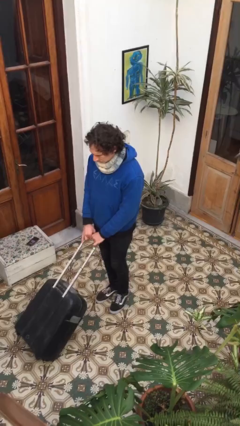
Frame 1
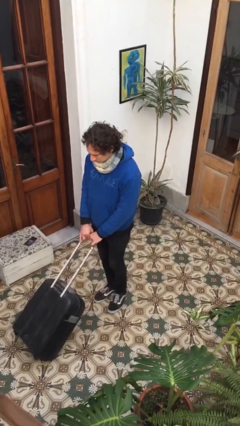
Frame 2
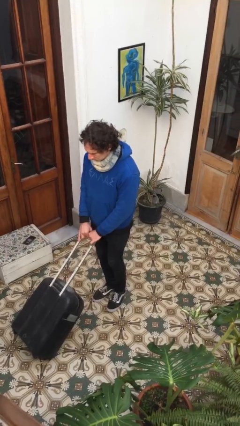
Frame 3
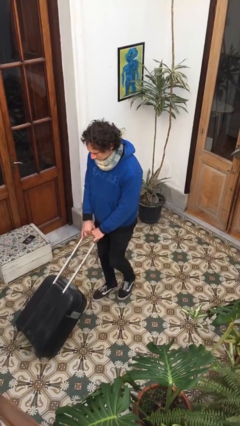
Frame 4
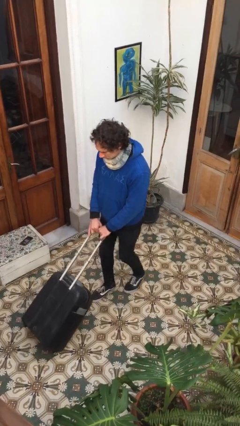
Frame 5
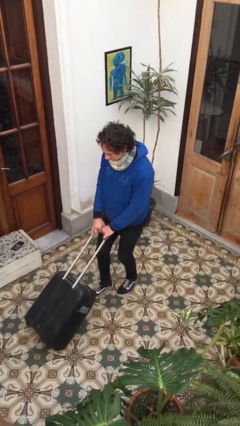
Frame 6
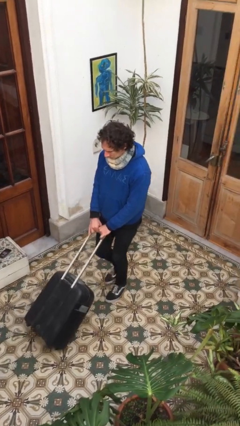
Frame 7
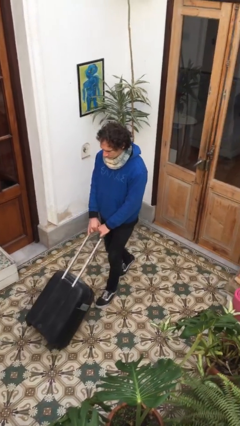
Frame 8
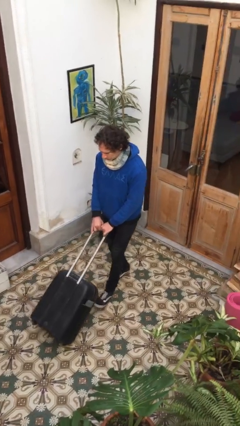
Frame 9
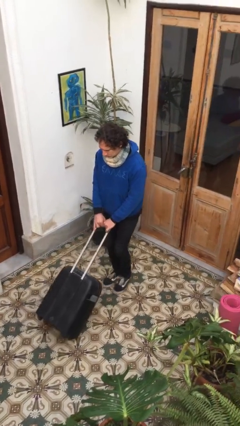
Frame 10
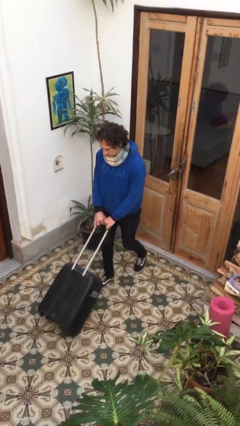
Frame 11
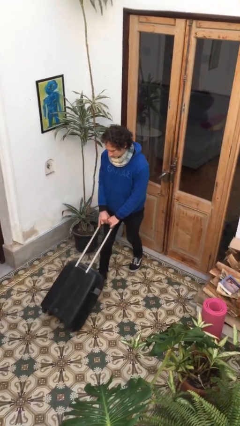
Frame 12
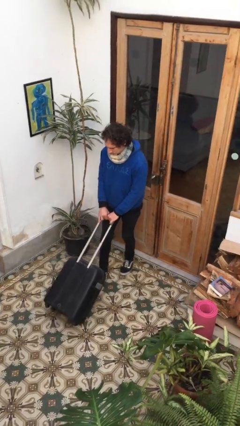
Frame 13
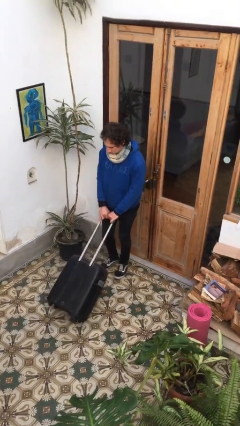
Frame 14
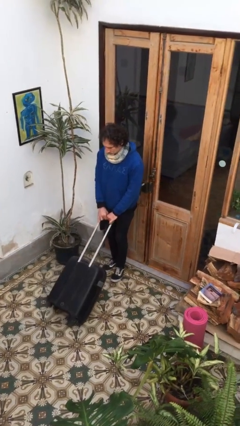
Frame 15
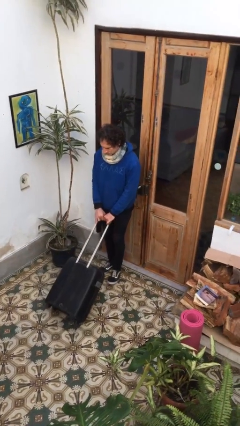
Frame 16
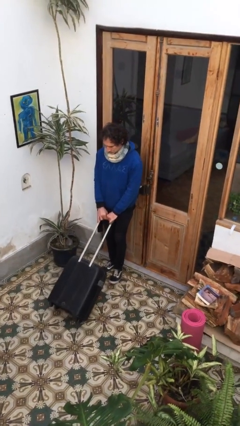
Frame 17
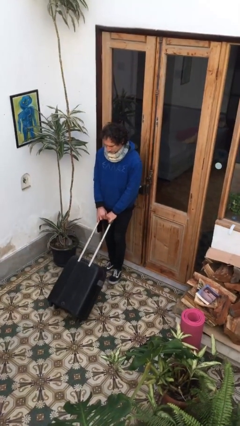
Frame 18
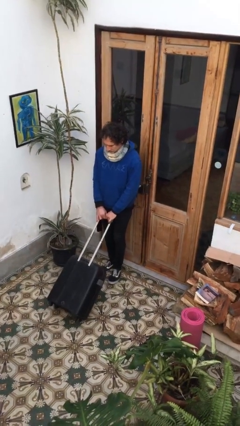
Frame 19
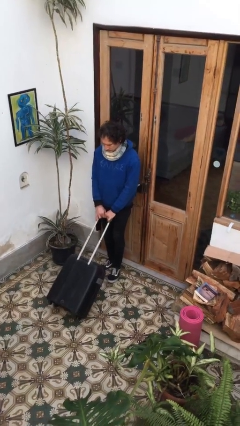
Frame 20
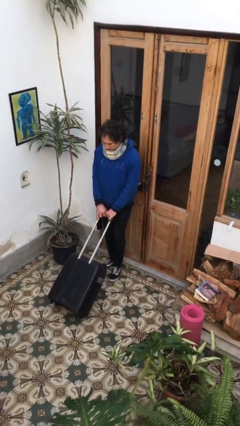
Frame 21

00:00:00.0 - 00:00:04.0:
person pulls wheeled cart

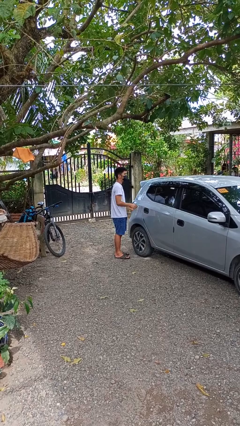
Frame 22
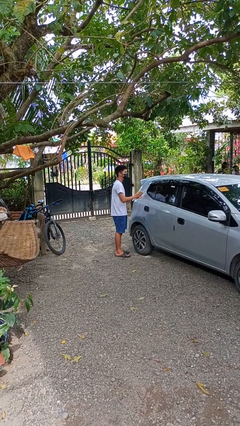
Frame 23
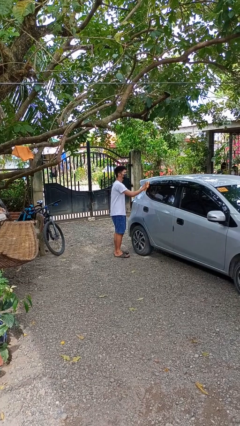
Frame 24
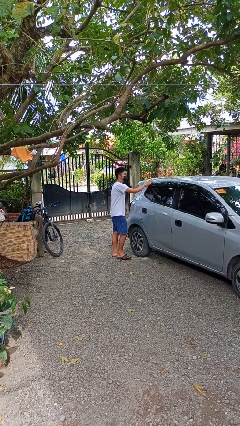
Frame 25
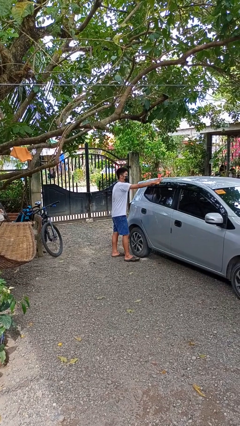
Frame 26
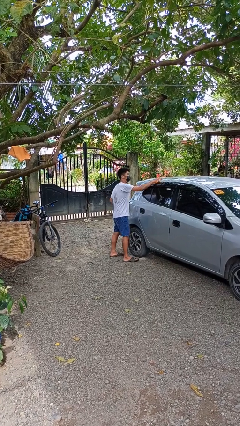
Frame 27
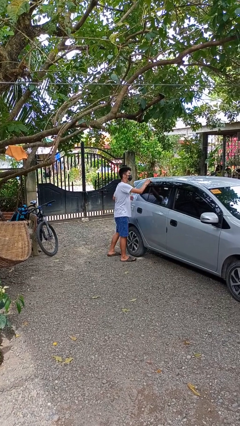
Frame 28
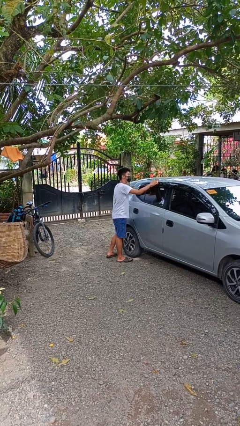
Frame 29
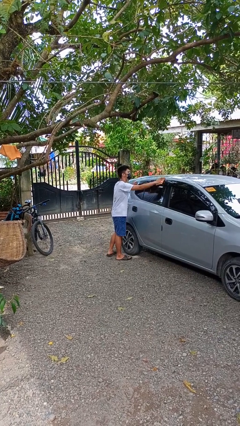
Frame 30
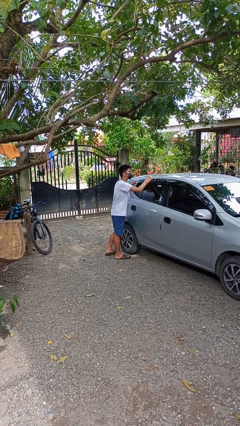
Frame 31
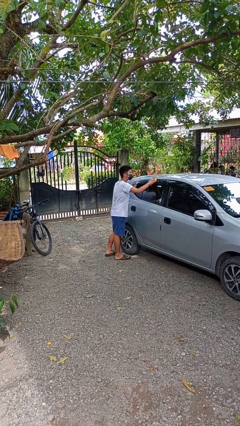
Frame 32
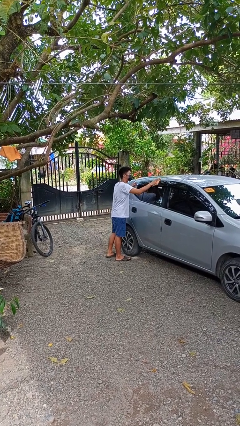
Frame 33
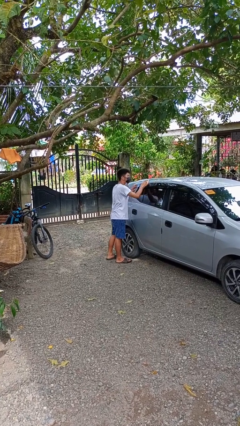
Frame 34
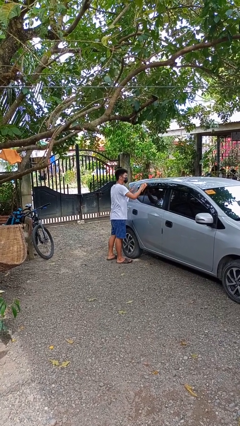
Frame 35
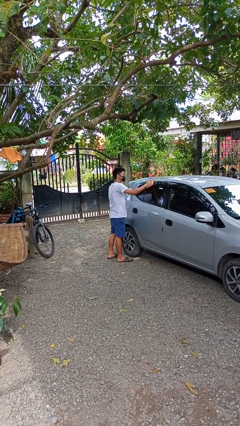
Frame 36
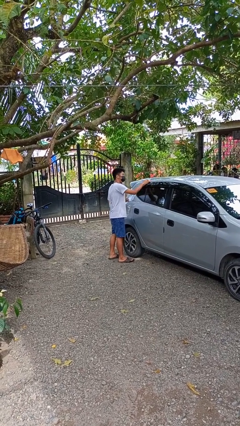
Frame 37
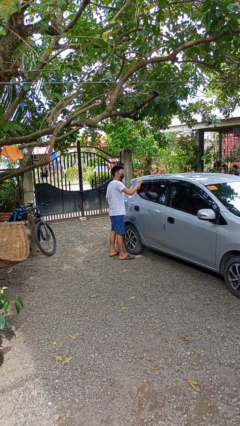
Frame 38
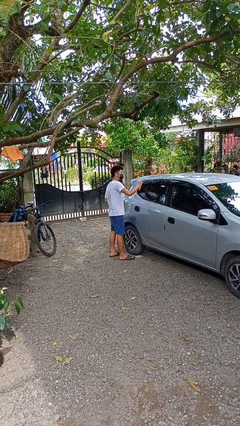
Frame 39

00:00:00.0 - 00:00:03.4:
person polishes car with rag

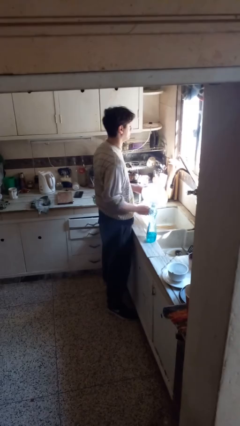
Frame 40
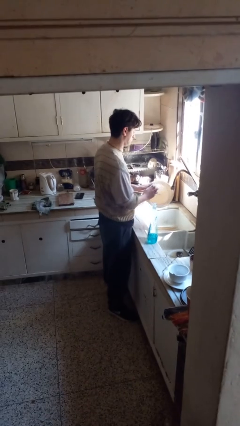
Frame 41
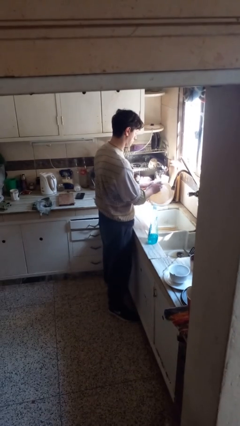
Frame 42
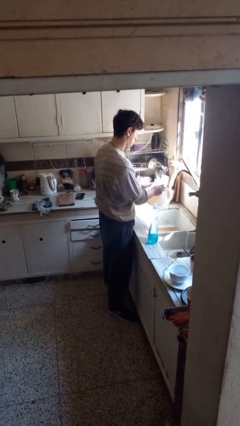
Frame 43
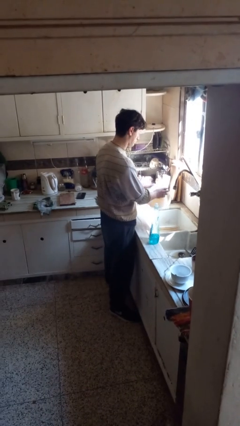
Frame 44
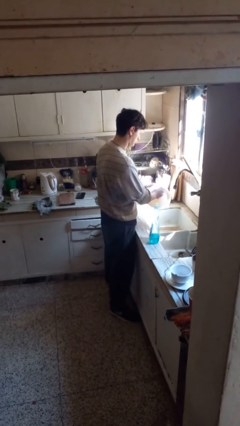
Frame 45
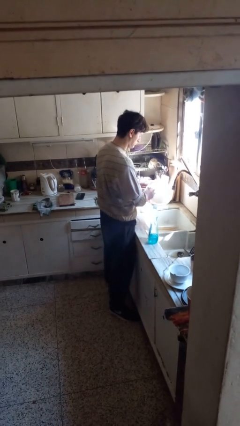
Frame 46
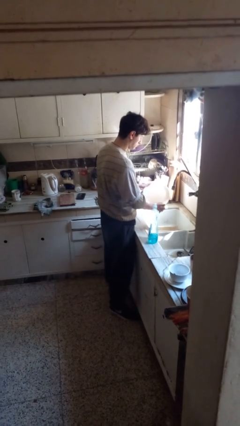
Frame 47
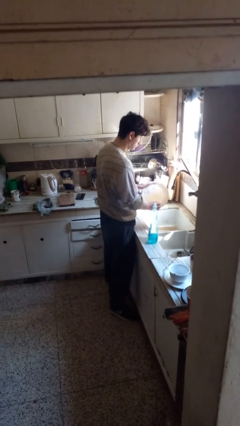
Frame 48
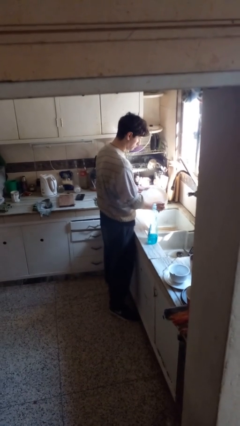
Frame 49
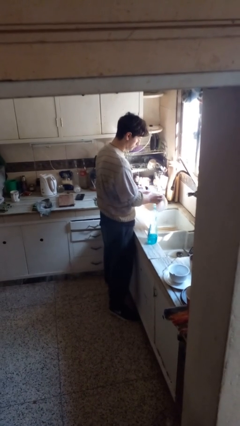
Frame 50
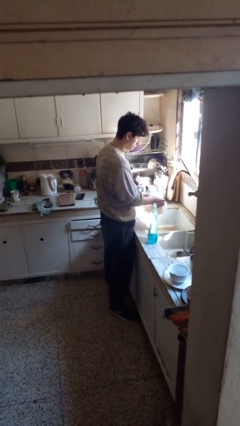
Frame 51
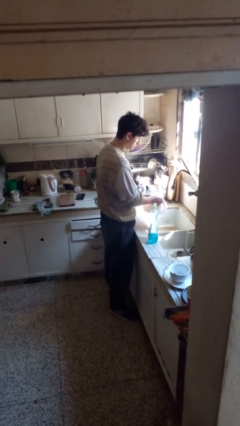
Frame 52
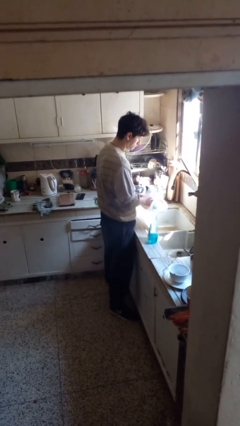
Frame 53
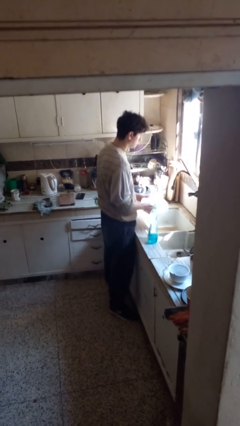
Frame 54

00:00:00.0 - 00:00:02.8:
person washes dish

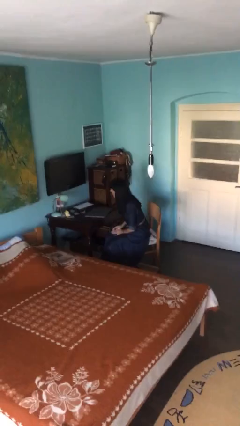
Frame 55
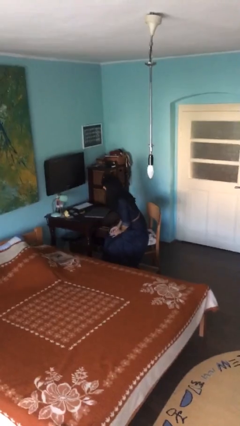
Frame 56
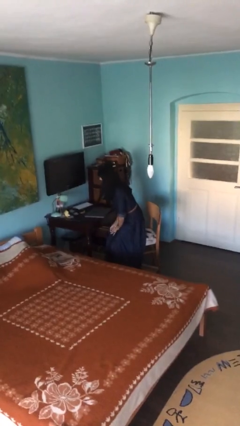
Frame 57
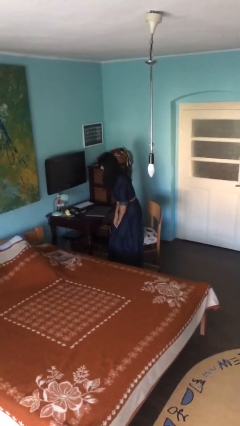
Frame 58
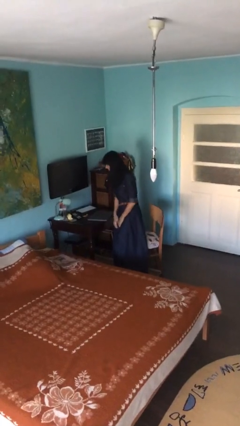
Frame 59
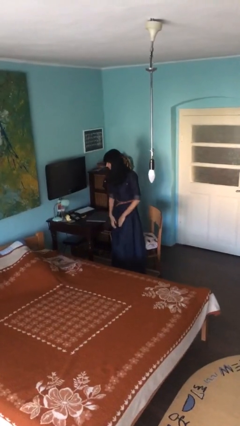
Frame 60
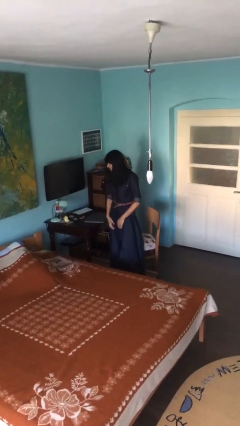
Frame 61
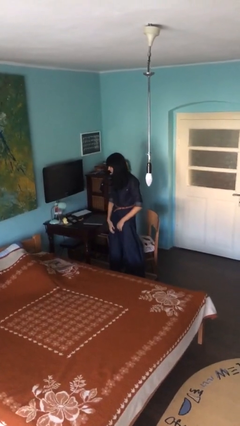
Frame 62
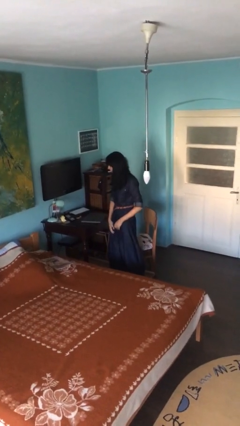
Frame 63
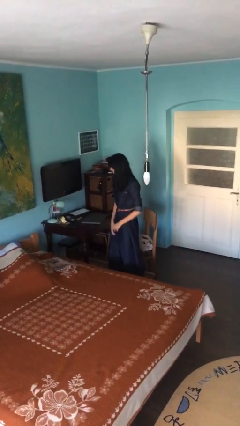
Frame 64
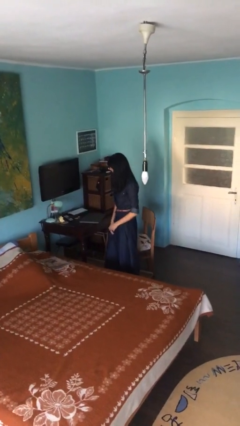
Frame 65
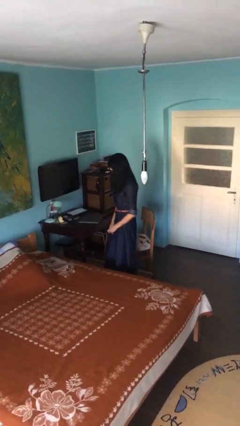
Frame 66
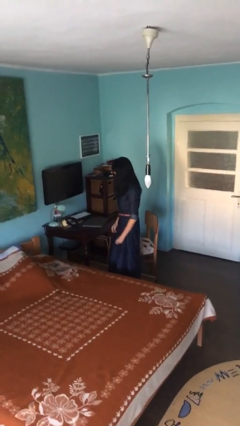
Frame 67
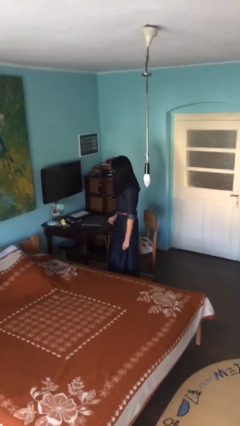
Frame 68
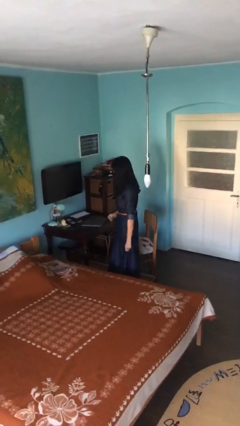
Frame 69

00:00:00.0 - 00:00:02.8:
person stands up

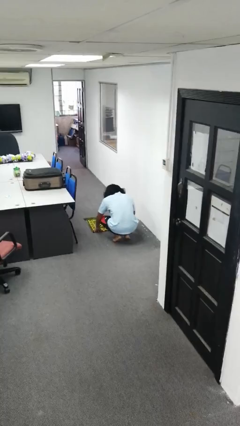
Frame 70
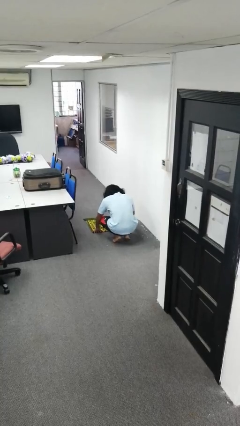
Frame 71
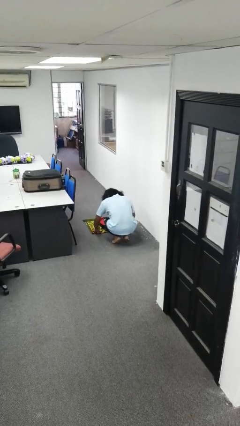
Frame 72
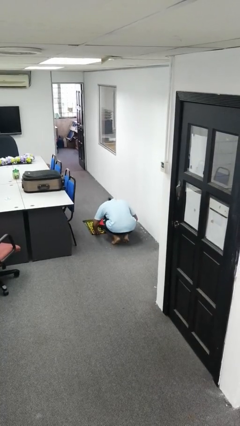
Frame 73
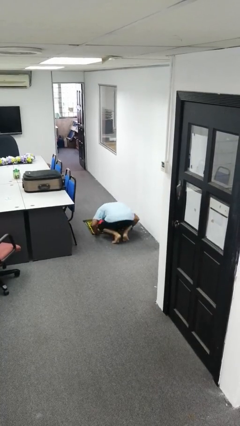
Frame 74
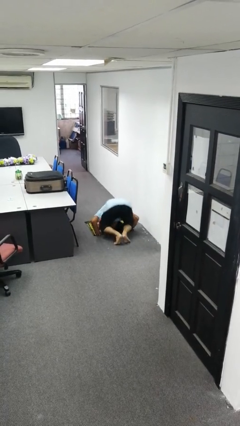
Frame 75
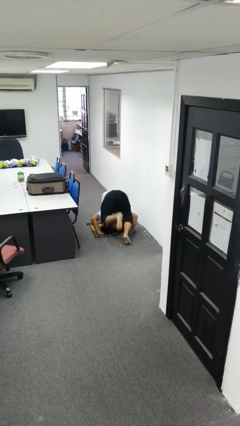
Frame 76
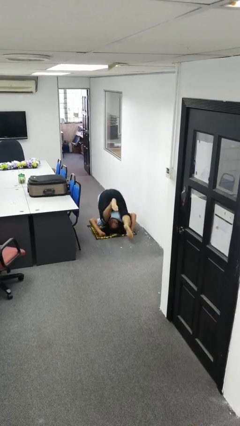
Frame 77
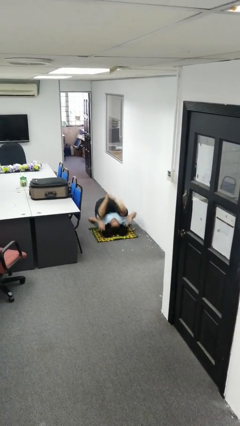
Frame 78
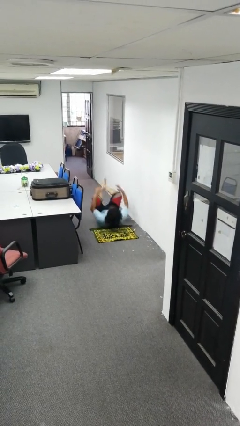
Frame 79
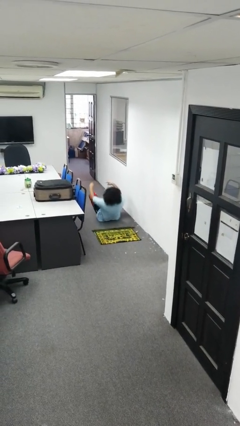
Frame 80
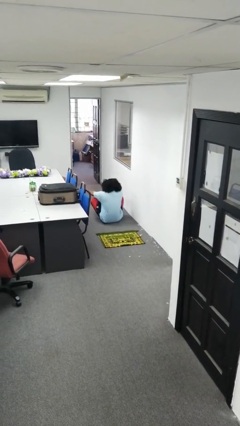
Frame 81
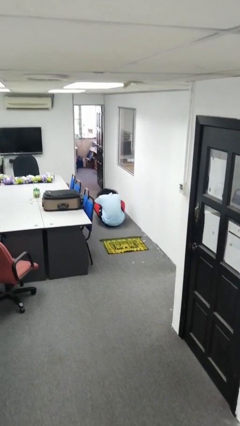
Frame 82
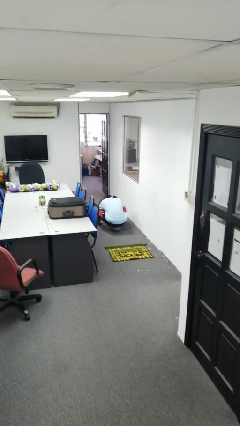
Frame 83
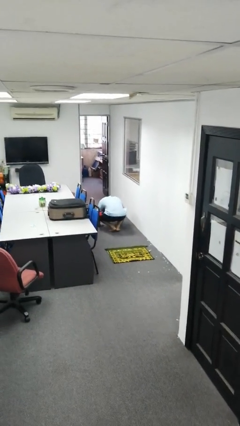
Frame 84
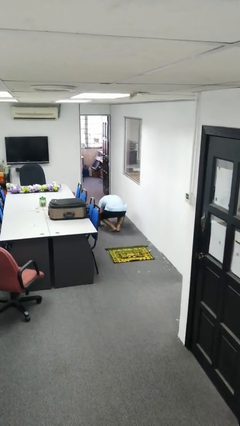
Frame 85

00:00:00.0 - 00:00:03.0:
person somersaults

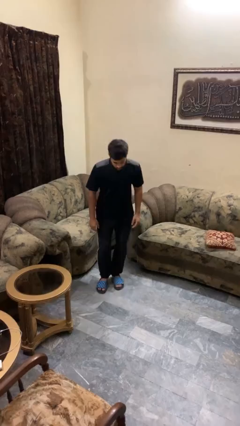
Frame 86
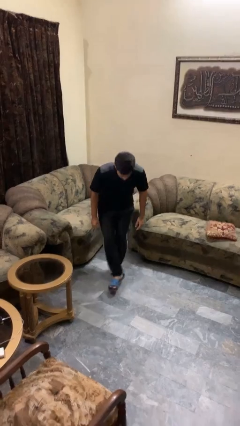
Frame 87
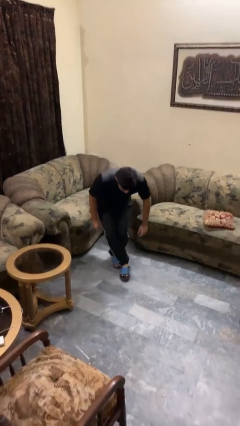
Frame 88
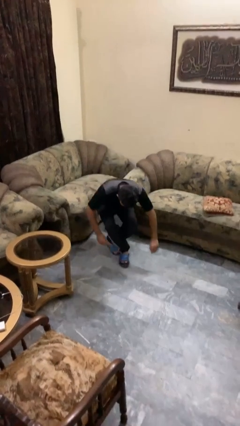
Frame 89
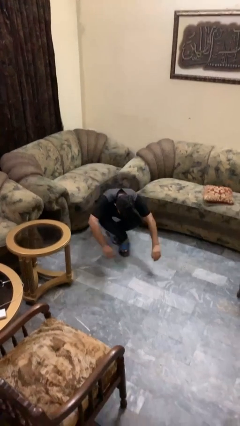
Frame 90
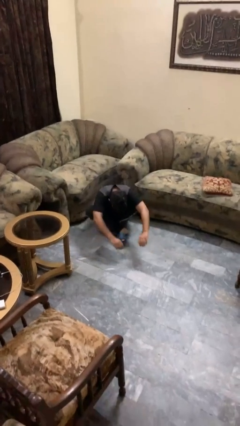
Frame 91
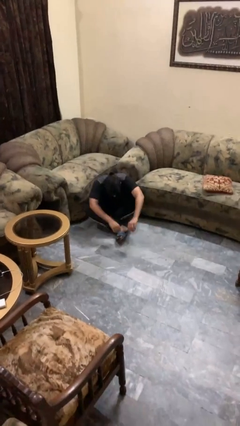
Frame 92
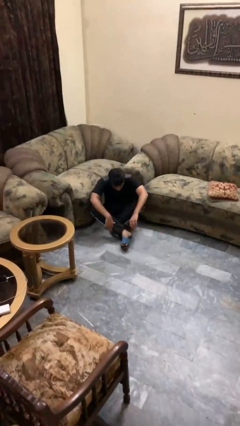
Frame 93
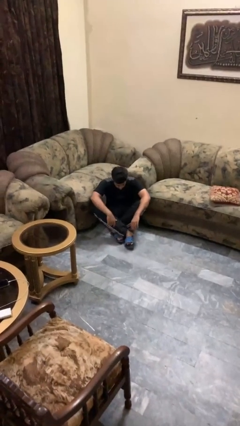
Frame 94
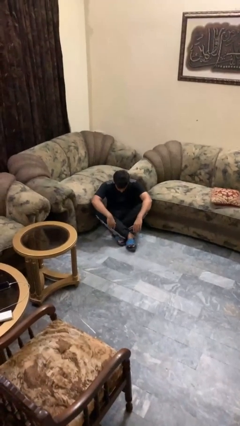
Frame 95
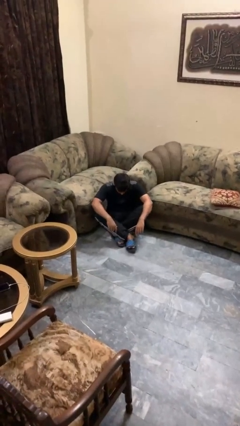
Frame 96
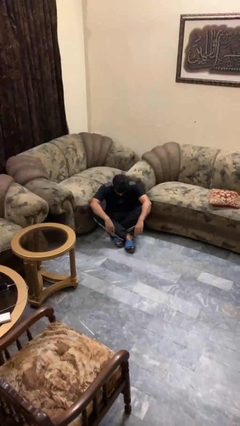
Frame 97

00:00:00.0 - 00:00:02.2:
person sits crisscross
